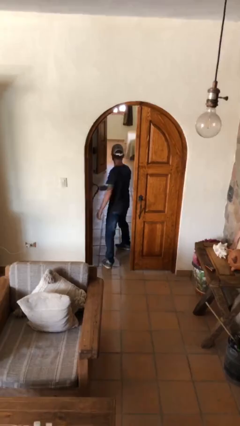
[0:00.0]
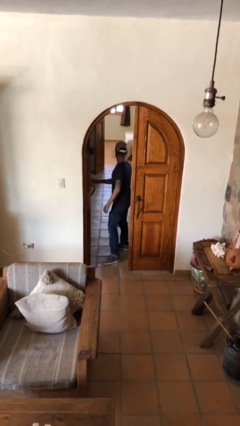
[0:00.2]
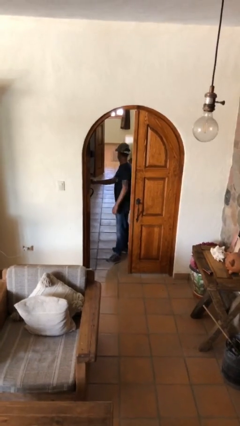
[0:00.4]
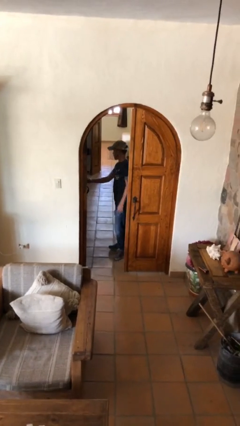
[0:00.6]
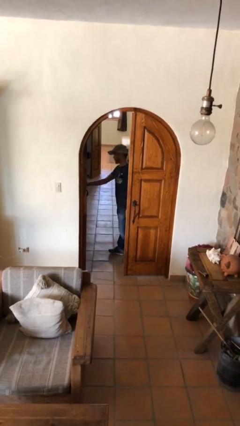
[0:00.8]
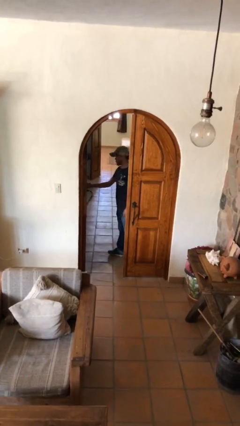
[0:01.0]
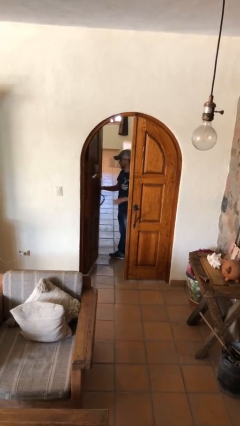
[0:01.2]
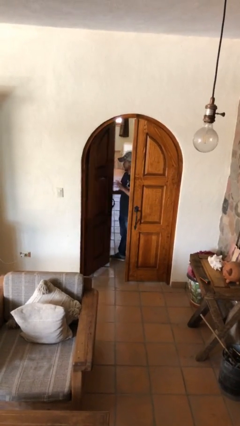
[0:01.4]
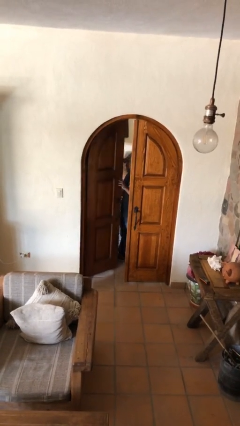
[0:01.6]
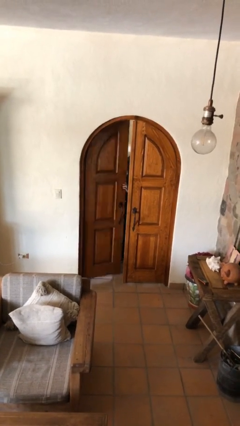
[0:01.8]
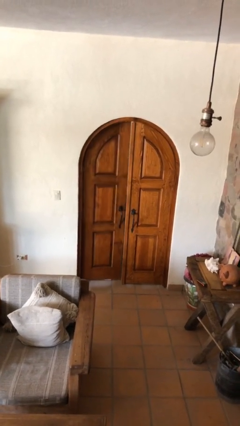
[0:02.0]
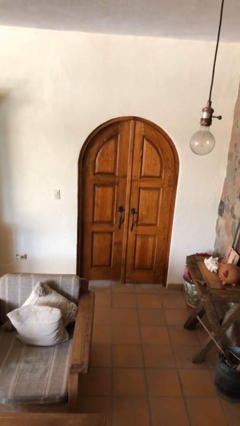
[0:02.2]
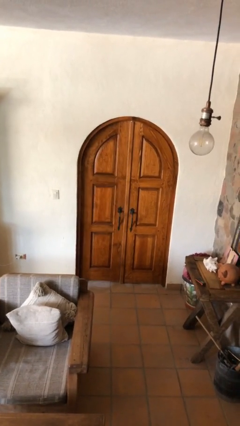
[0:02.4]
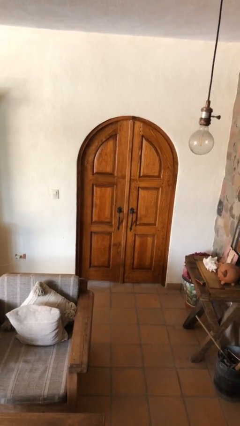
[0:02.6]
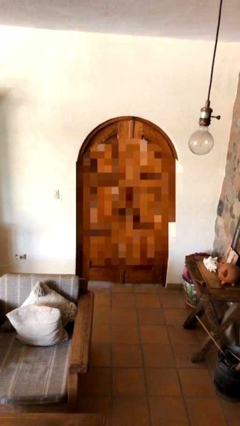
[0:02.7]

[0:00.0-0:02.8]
person closes facility door

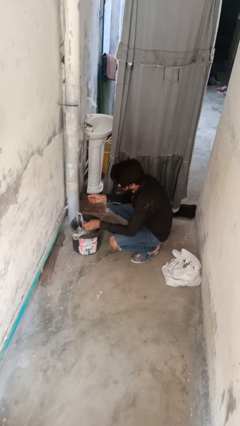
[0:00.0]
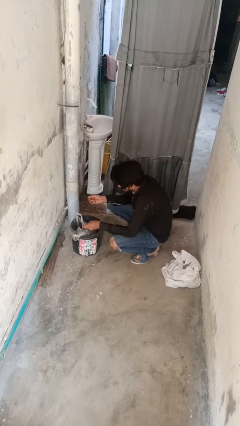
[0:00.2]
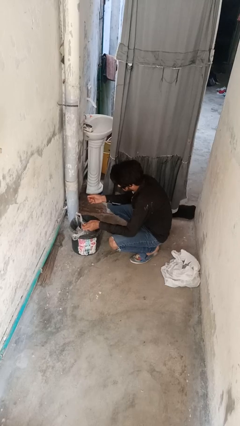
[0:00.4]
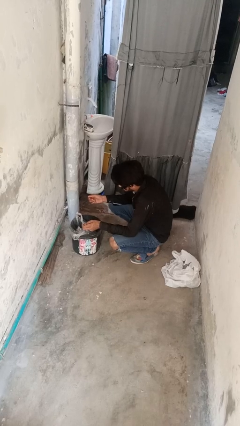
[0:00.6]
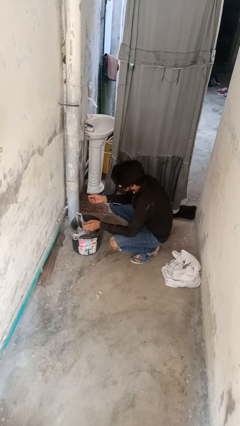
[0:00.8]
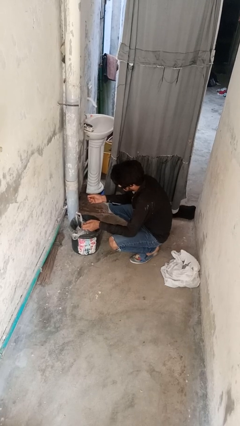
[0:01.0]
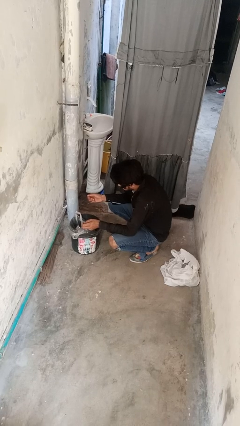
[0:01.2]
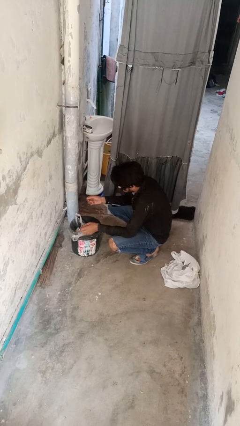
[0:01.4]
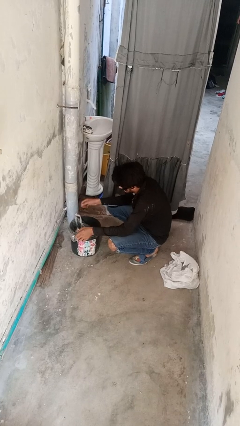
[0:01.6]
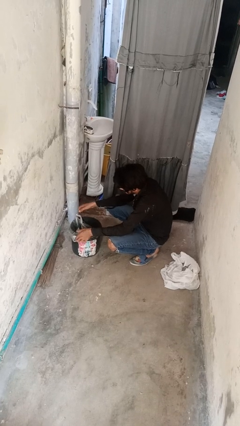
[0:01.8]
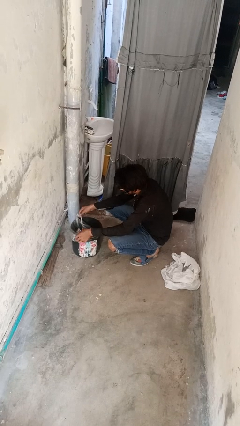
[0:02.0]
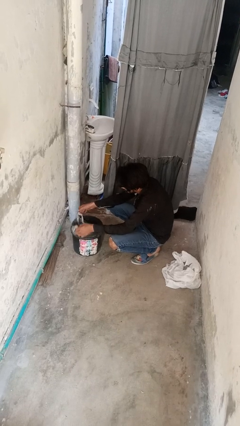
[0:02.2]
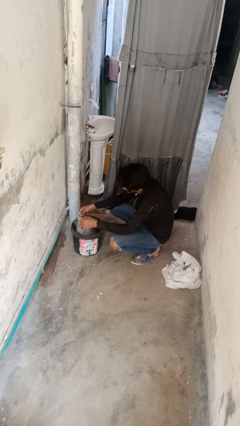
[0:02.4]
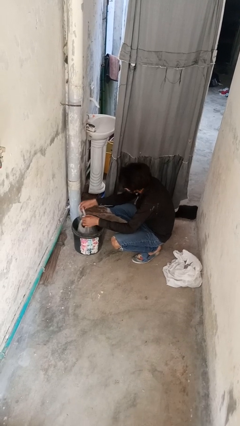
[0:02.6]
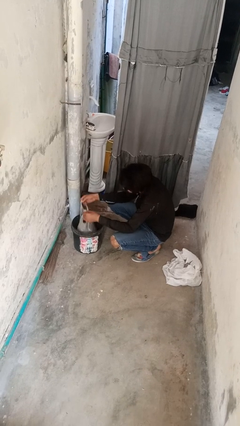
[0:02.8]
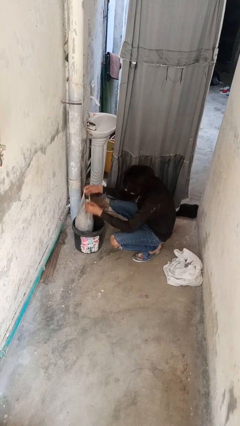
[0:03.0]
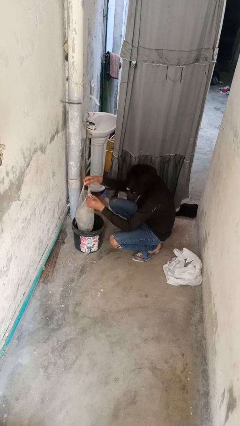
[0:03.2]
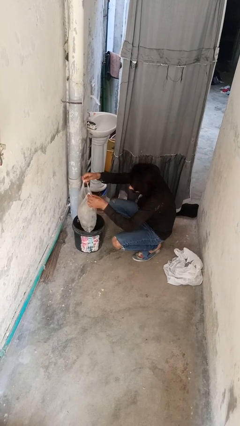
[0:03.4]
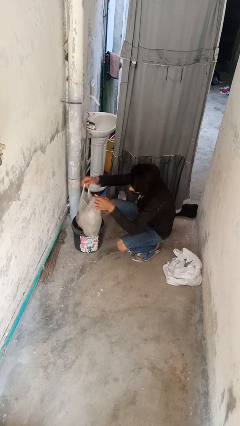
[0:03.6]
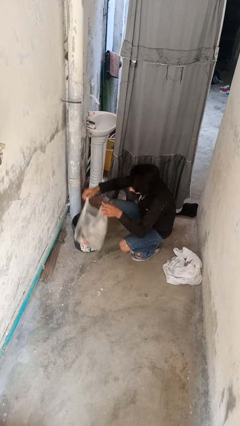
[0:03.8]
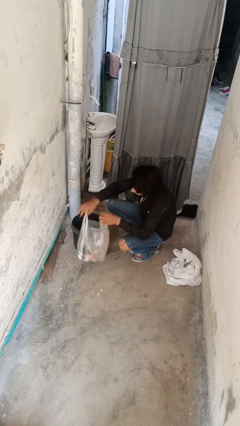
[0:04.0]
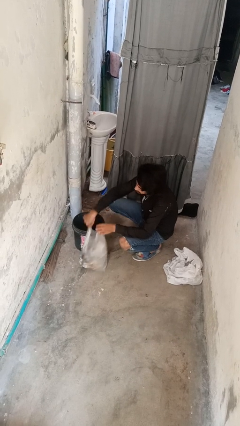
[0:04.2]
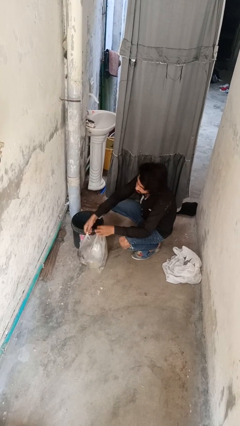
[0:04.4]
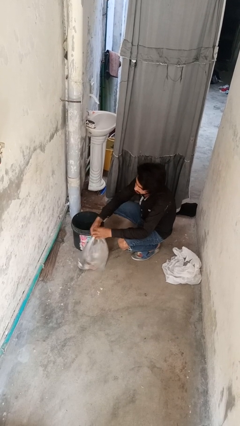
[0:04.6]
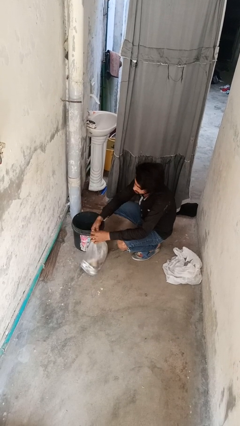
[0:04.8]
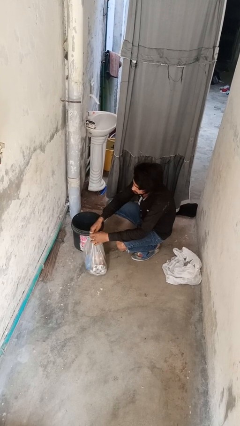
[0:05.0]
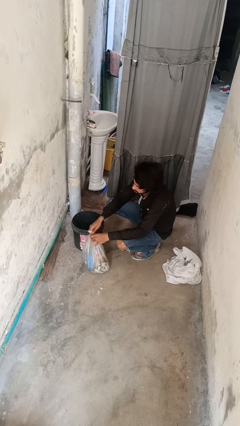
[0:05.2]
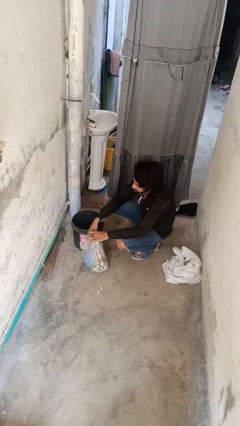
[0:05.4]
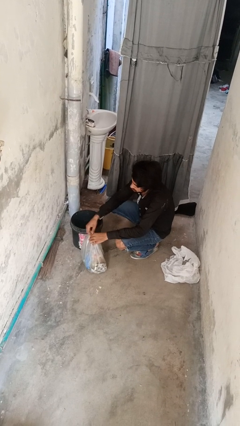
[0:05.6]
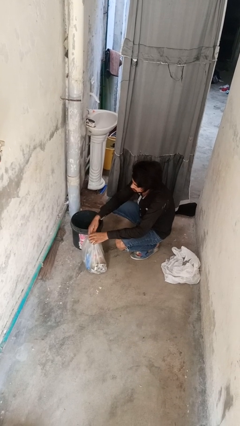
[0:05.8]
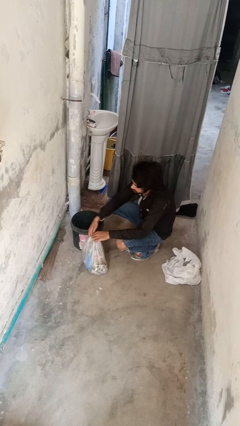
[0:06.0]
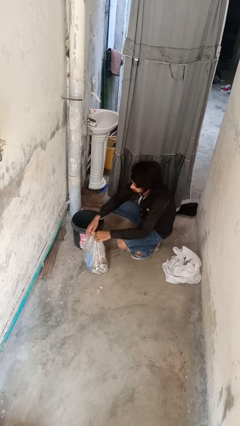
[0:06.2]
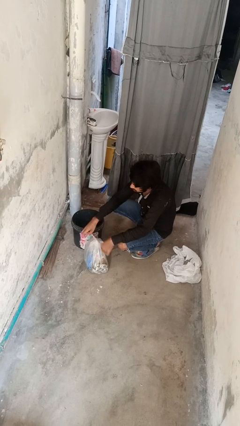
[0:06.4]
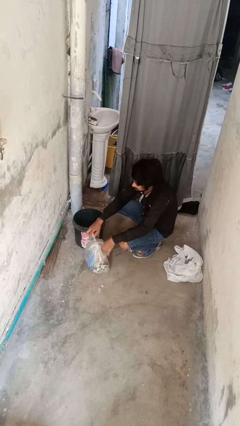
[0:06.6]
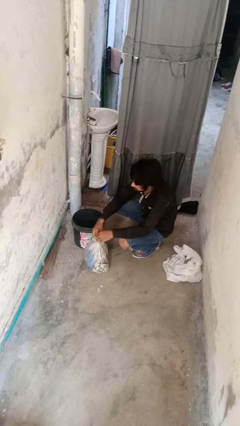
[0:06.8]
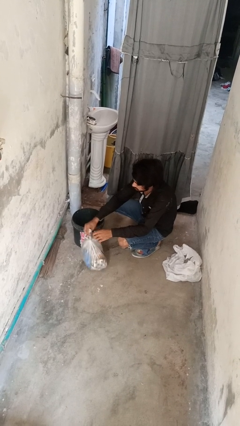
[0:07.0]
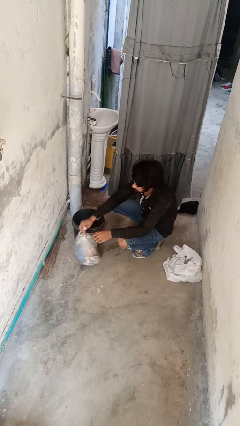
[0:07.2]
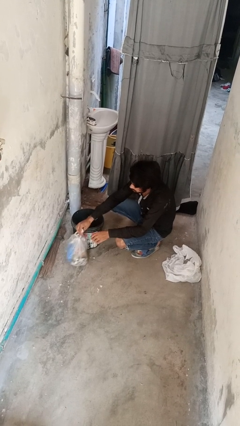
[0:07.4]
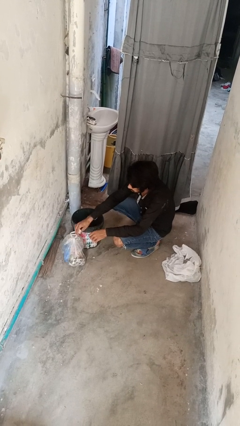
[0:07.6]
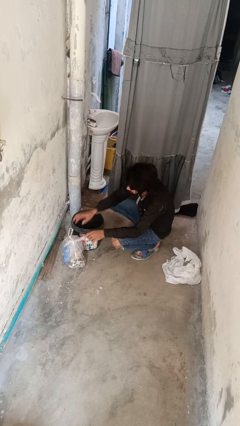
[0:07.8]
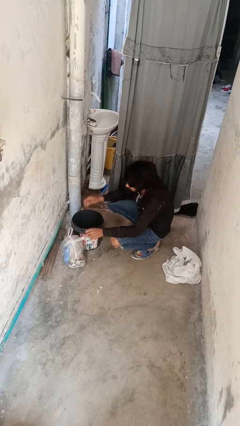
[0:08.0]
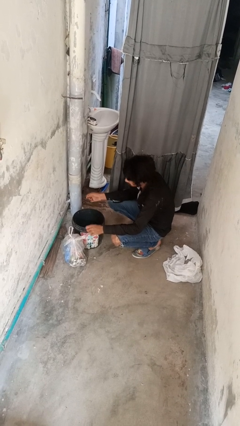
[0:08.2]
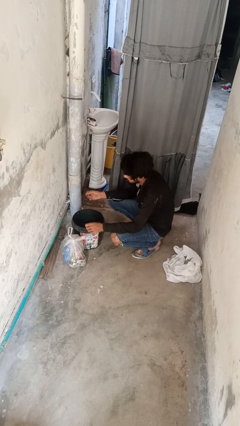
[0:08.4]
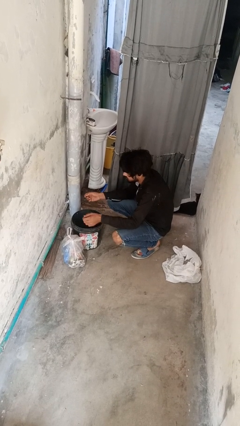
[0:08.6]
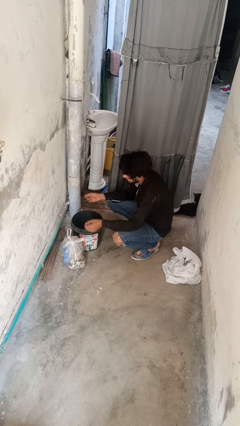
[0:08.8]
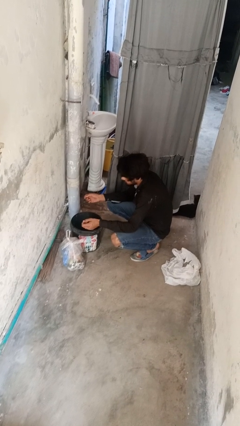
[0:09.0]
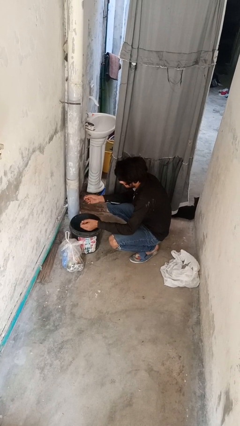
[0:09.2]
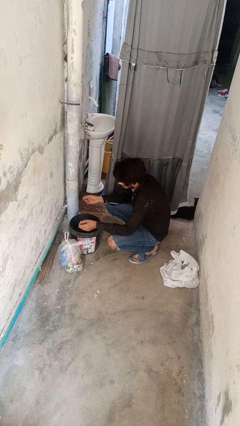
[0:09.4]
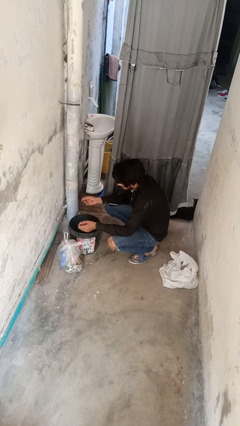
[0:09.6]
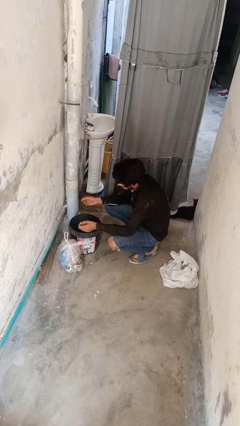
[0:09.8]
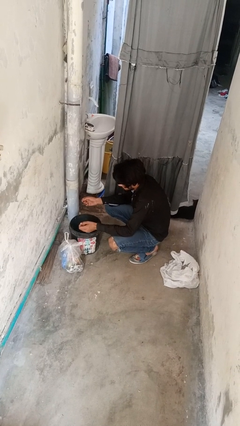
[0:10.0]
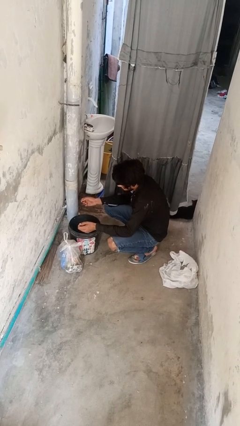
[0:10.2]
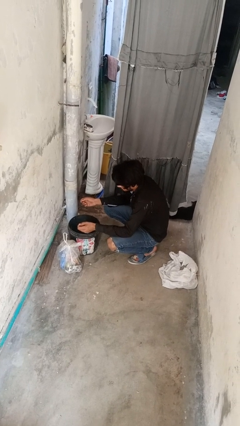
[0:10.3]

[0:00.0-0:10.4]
person removes trashbag from trashcan

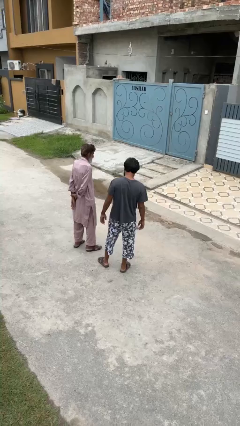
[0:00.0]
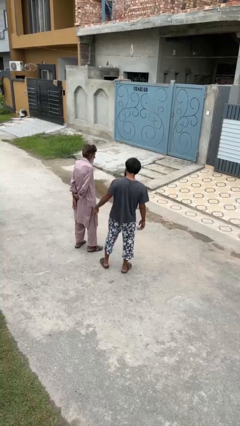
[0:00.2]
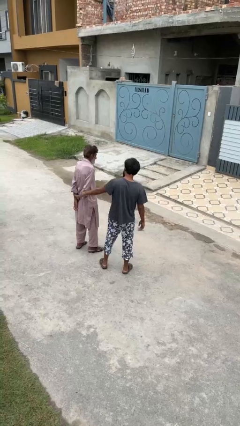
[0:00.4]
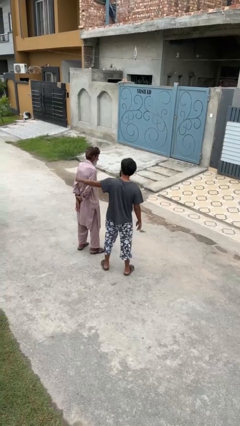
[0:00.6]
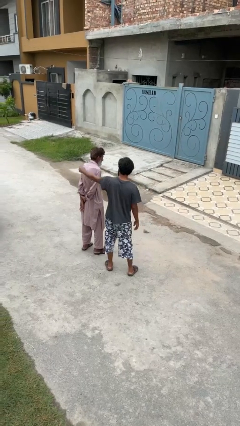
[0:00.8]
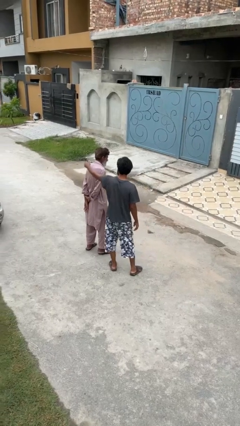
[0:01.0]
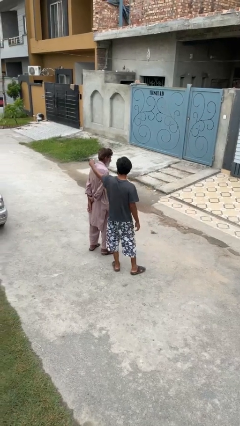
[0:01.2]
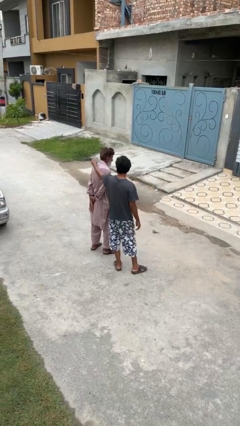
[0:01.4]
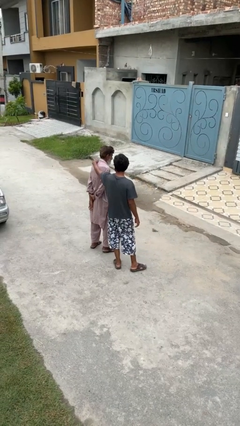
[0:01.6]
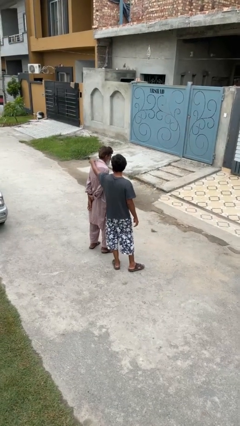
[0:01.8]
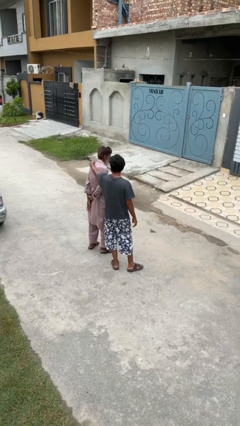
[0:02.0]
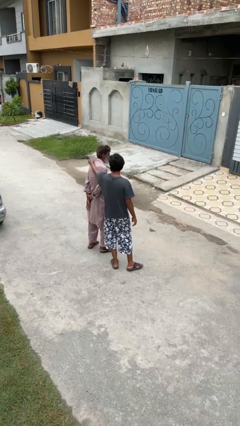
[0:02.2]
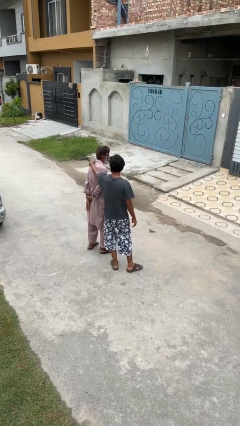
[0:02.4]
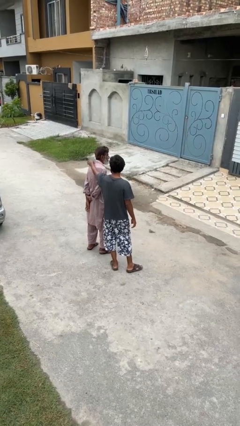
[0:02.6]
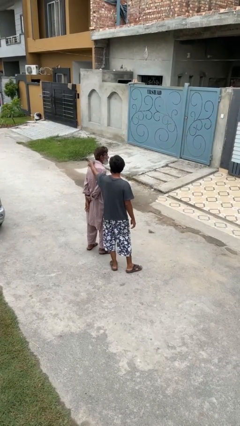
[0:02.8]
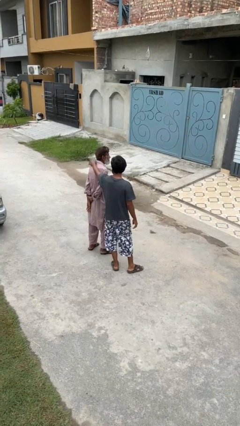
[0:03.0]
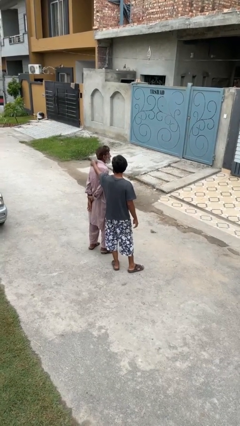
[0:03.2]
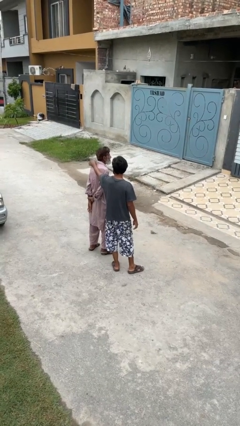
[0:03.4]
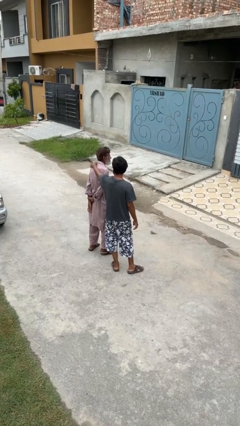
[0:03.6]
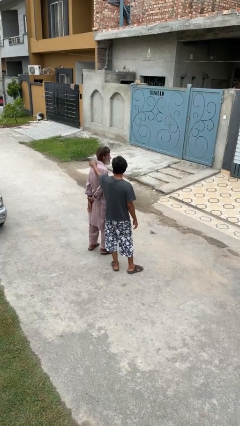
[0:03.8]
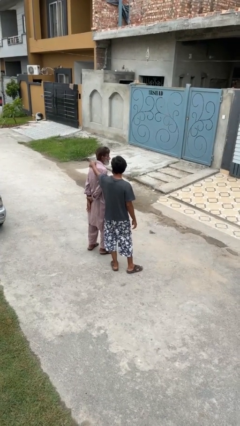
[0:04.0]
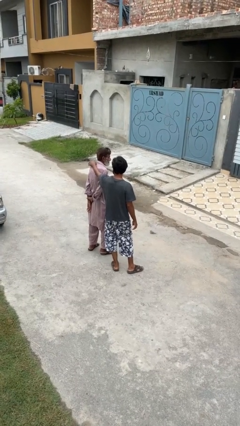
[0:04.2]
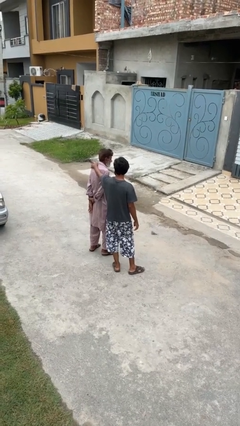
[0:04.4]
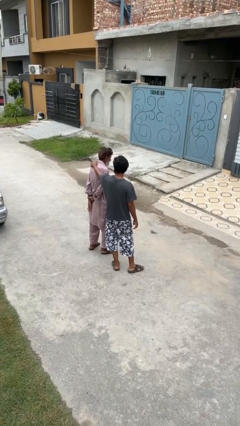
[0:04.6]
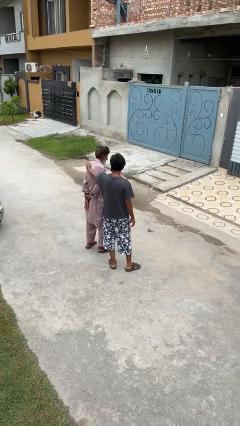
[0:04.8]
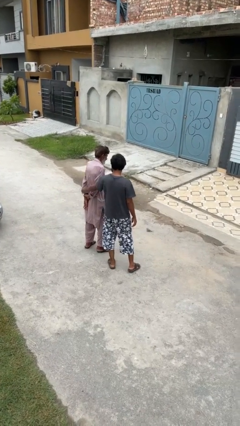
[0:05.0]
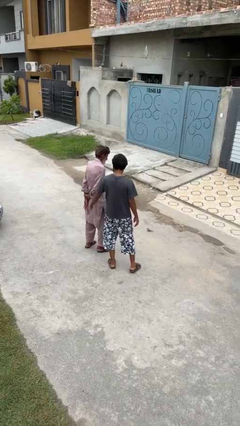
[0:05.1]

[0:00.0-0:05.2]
person pounds shoulders of person
